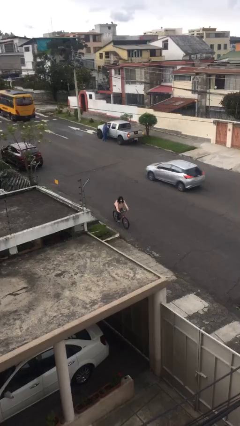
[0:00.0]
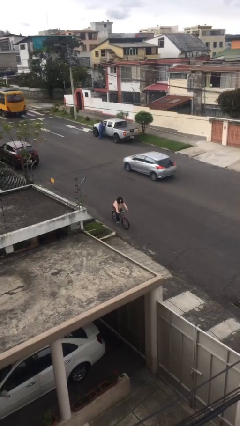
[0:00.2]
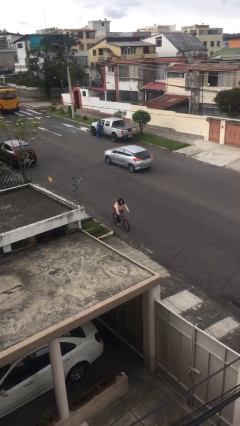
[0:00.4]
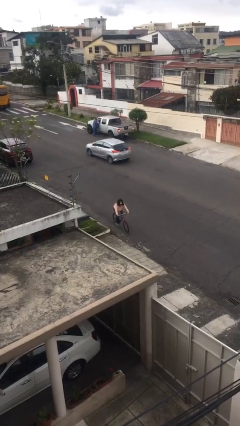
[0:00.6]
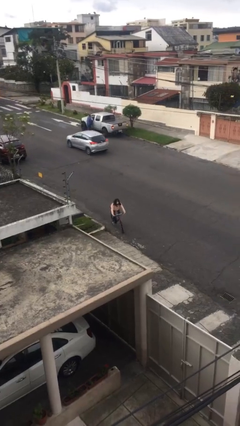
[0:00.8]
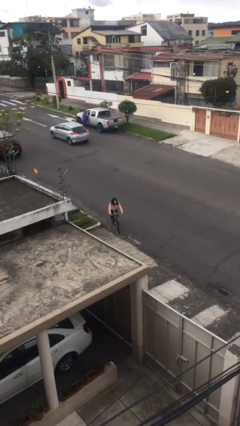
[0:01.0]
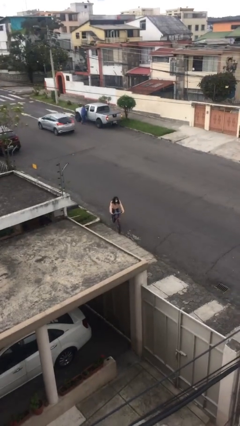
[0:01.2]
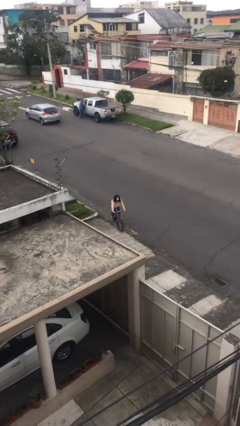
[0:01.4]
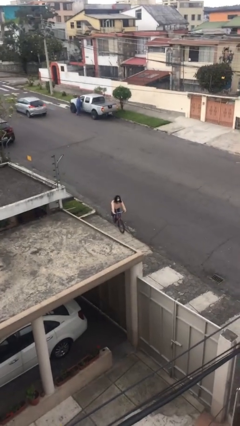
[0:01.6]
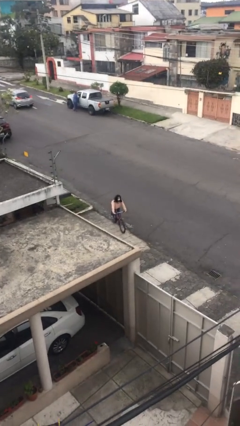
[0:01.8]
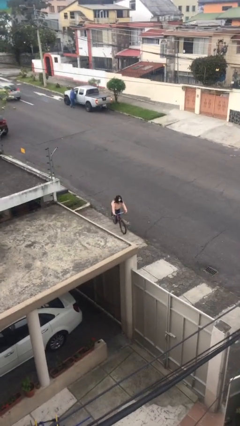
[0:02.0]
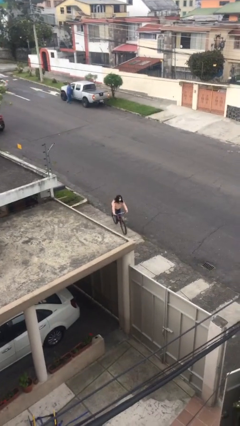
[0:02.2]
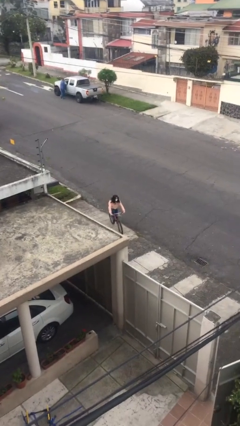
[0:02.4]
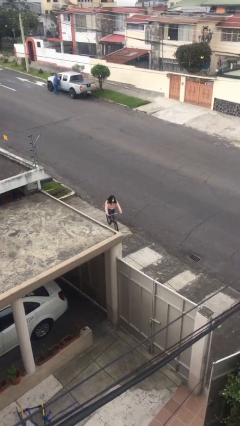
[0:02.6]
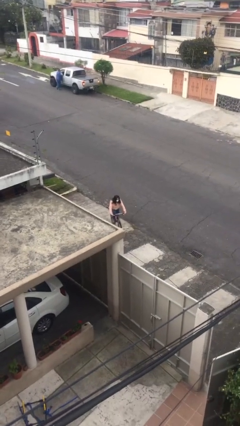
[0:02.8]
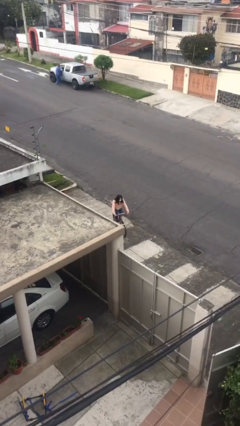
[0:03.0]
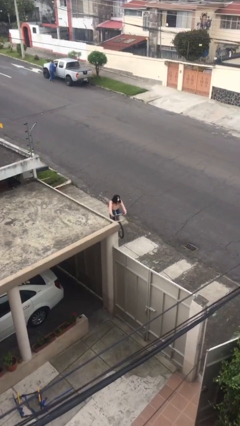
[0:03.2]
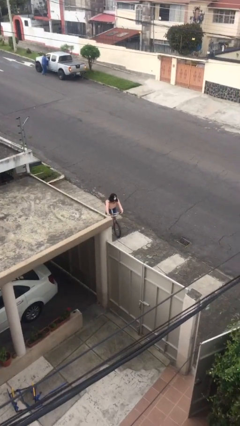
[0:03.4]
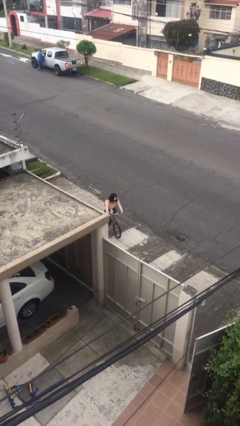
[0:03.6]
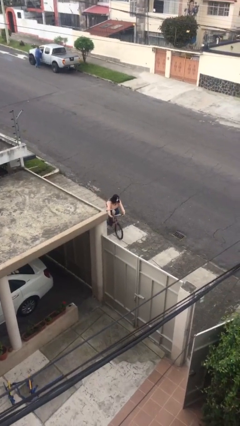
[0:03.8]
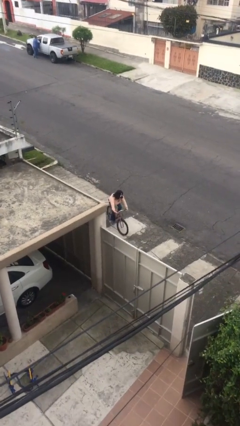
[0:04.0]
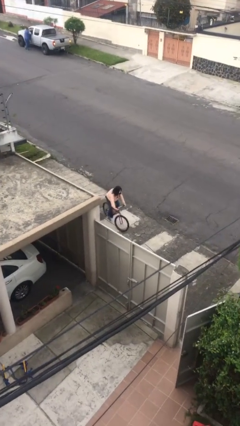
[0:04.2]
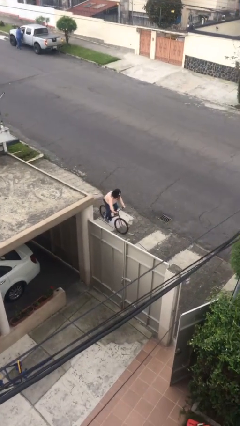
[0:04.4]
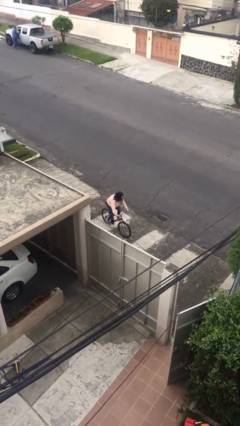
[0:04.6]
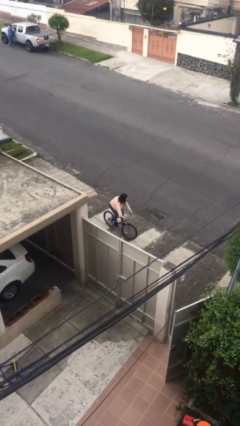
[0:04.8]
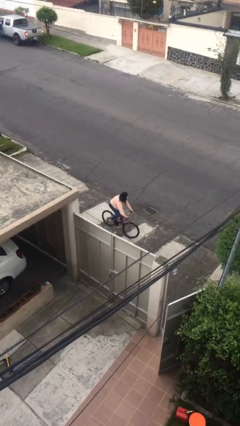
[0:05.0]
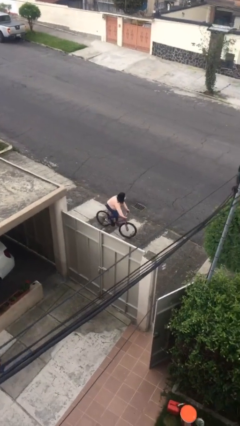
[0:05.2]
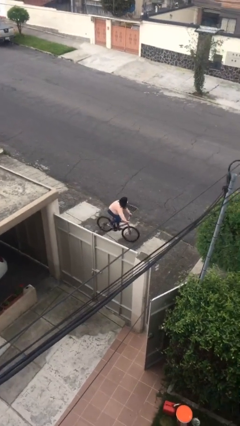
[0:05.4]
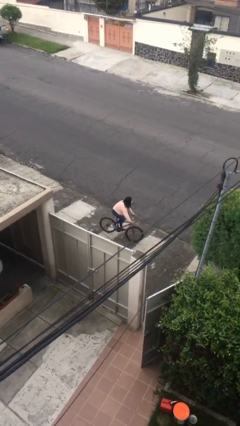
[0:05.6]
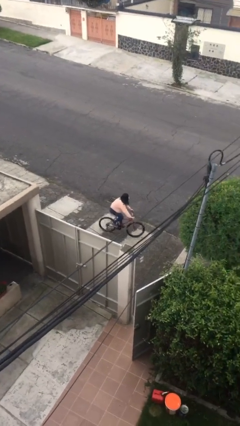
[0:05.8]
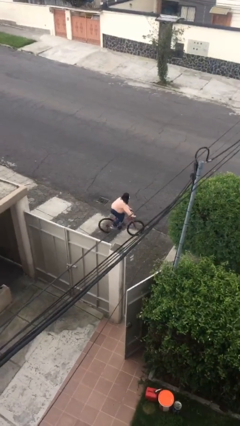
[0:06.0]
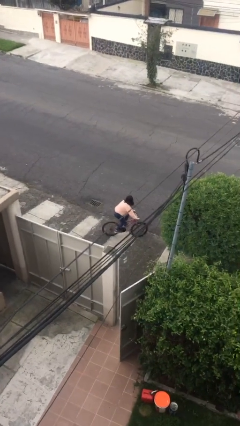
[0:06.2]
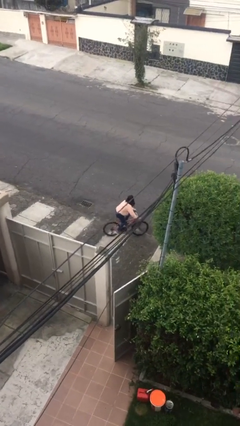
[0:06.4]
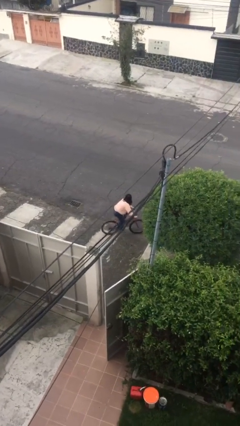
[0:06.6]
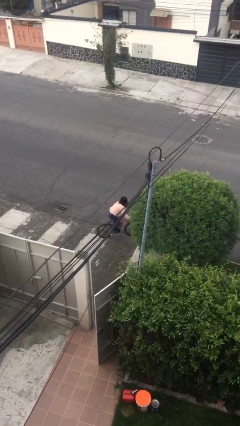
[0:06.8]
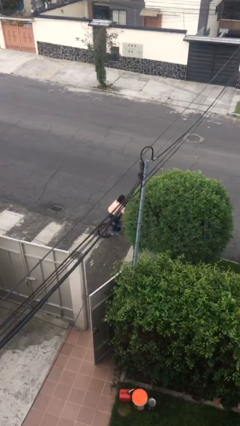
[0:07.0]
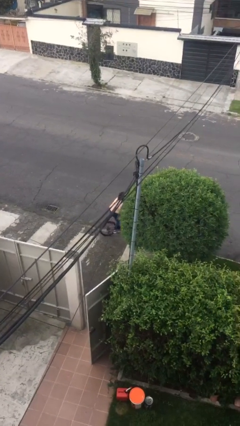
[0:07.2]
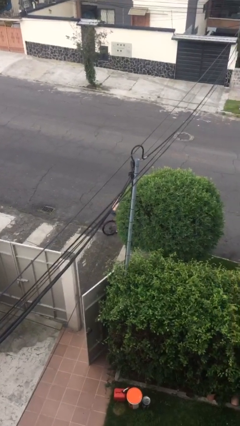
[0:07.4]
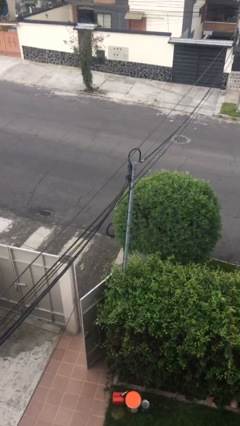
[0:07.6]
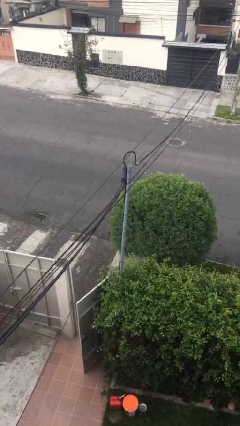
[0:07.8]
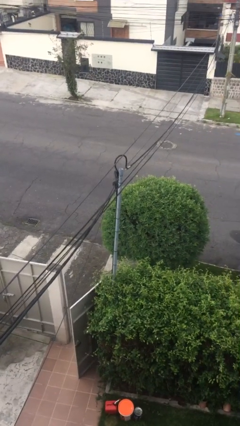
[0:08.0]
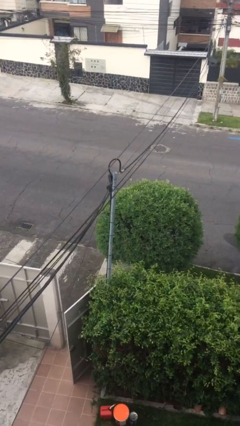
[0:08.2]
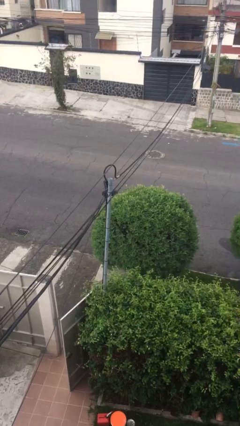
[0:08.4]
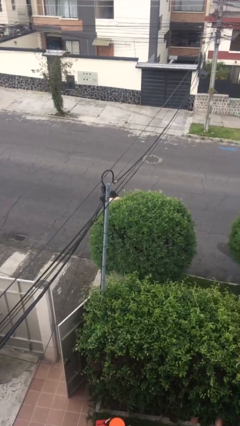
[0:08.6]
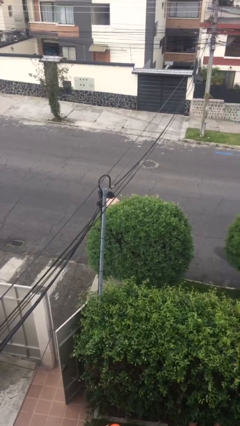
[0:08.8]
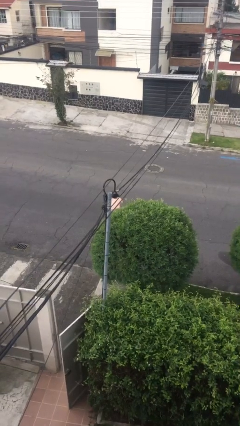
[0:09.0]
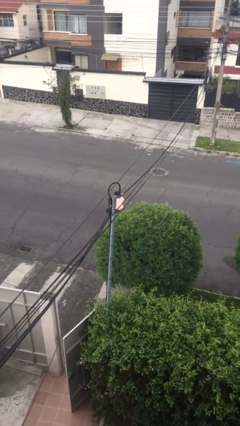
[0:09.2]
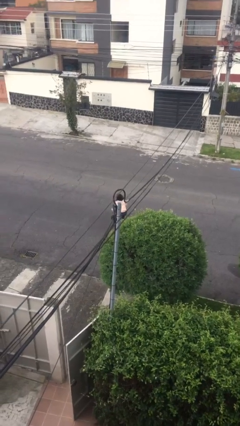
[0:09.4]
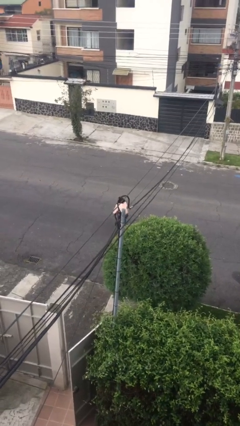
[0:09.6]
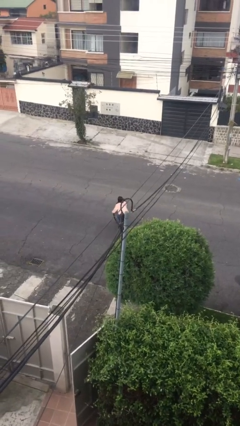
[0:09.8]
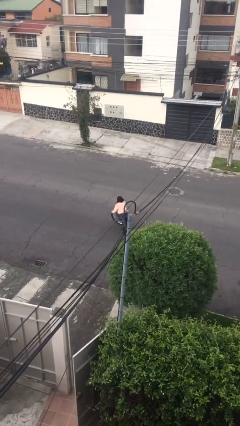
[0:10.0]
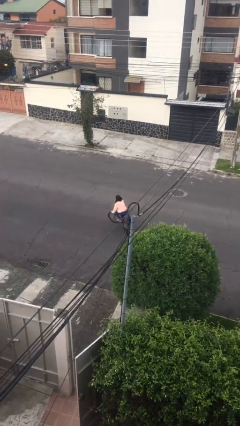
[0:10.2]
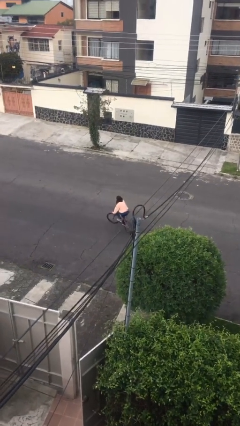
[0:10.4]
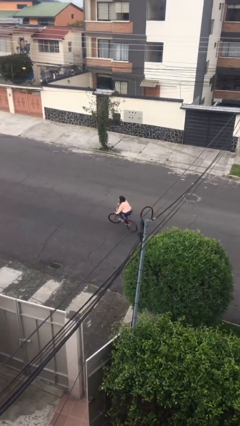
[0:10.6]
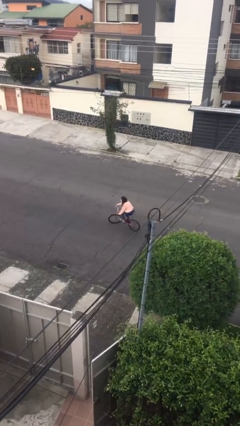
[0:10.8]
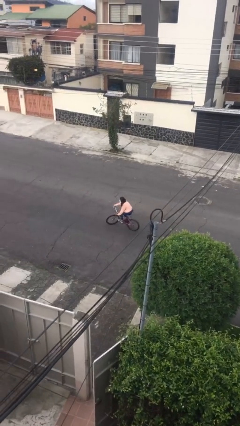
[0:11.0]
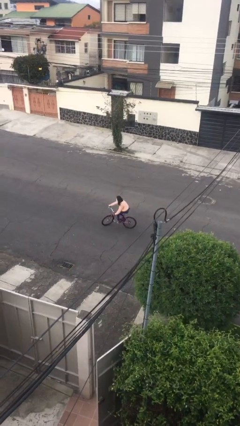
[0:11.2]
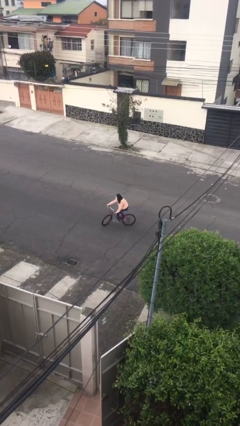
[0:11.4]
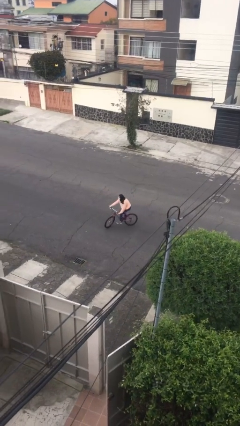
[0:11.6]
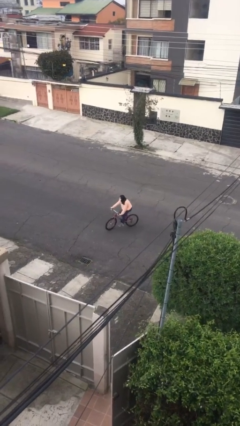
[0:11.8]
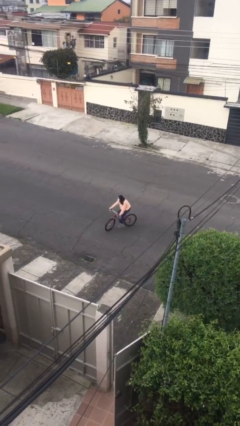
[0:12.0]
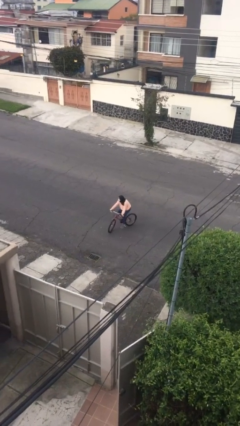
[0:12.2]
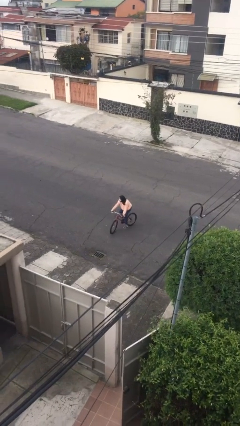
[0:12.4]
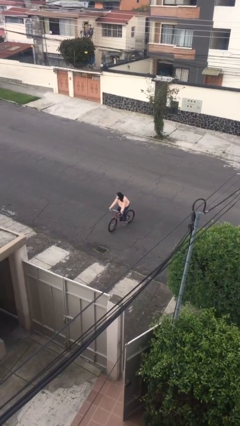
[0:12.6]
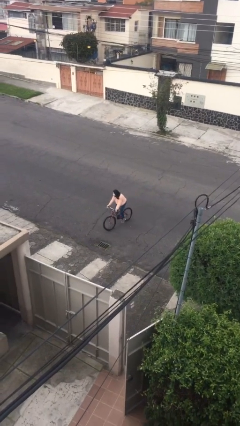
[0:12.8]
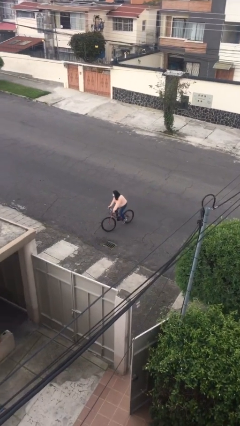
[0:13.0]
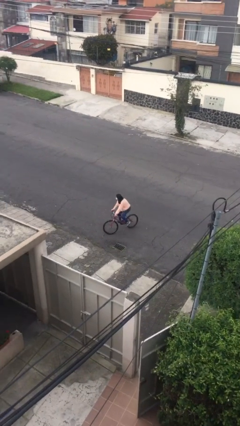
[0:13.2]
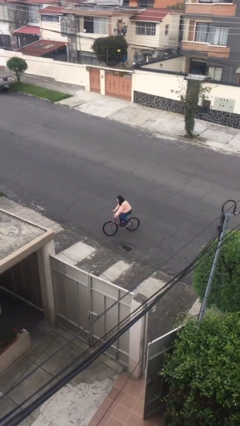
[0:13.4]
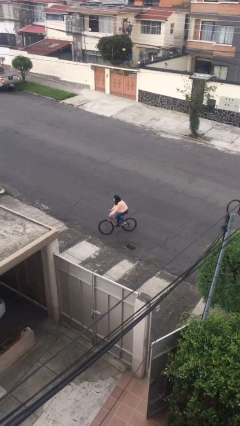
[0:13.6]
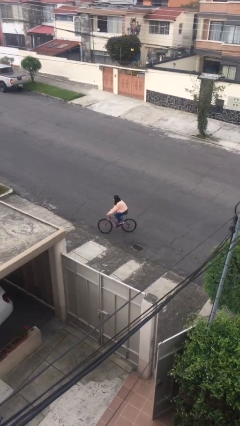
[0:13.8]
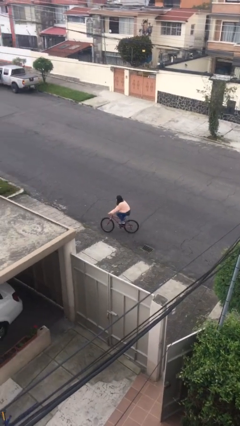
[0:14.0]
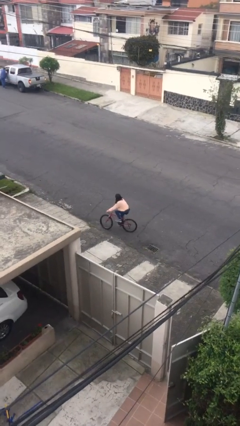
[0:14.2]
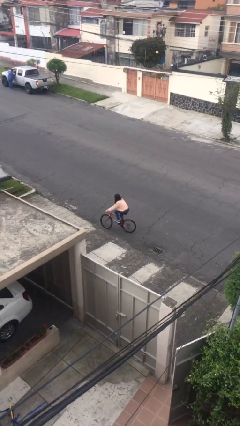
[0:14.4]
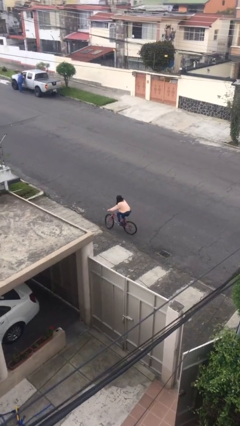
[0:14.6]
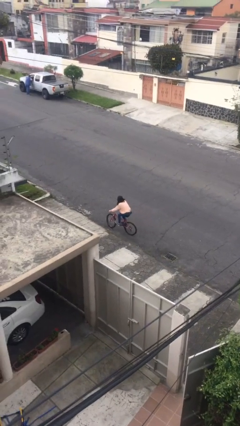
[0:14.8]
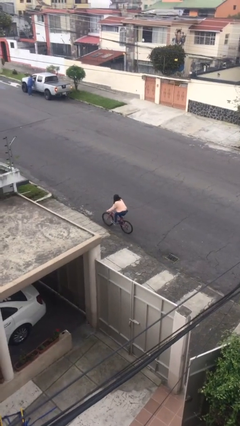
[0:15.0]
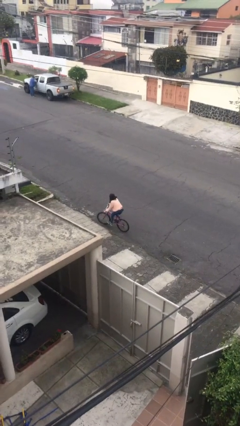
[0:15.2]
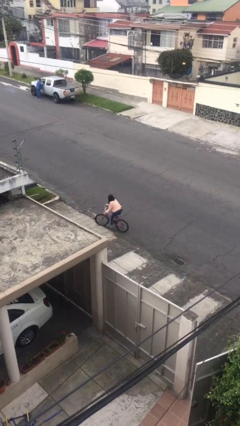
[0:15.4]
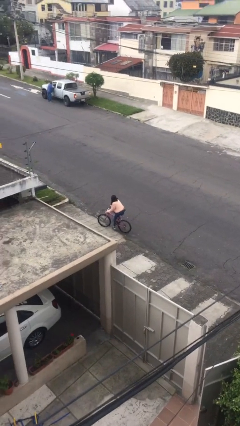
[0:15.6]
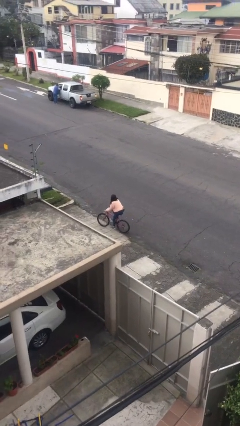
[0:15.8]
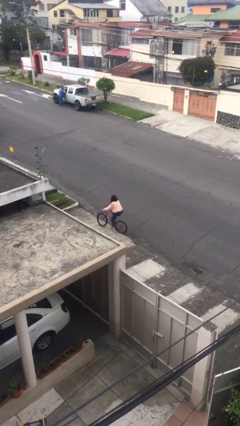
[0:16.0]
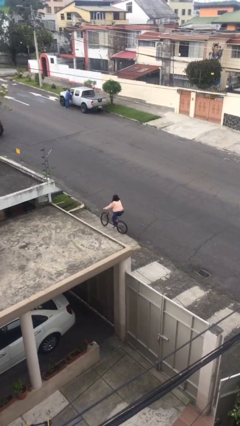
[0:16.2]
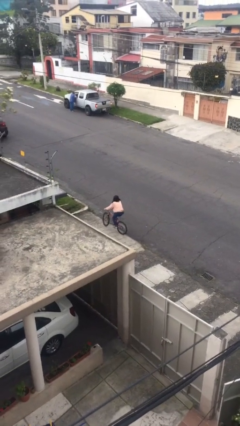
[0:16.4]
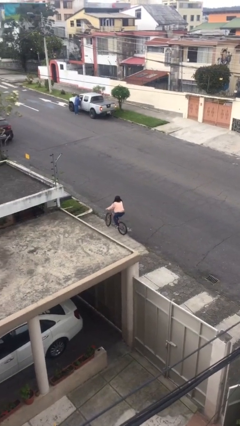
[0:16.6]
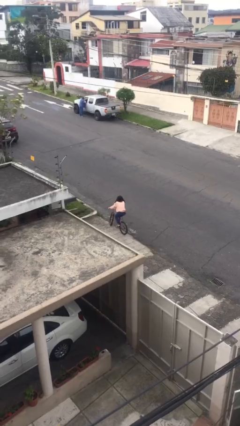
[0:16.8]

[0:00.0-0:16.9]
person rides bicycle

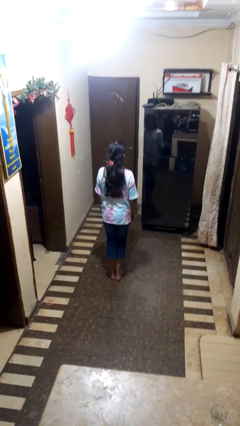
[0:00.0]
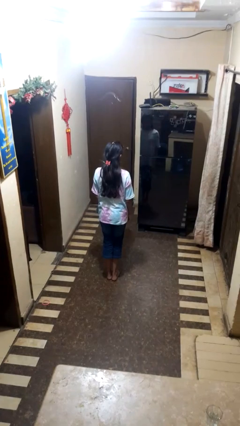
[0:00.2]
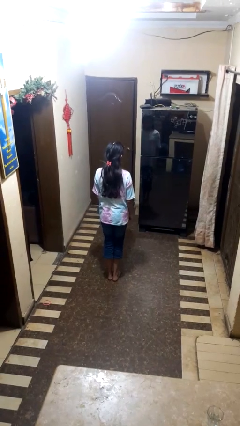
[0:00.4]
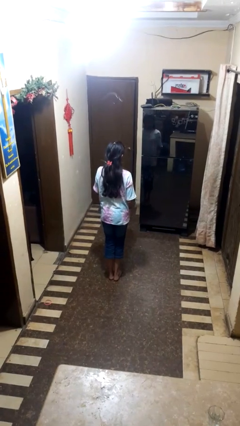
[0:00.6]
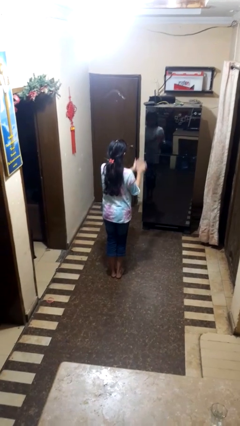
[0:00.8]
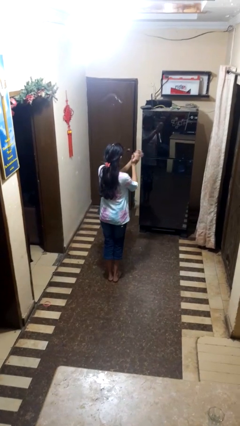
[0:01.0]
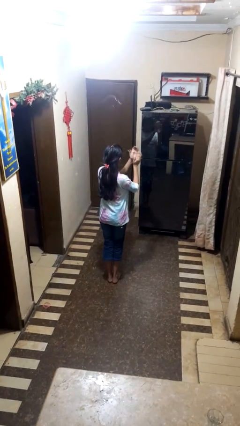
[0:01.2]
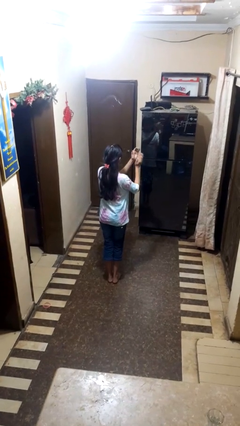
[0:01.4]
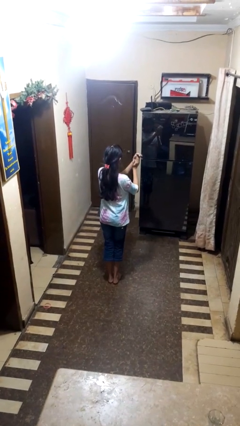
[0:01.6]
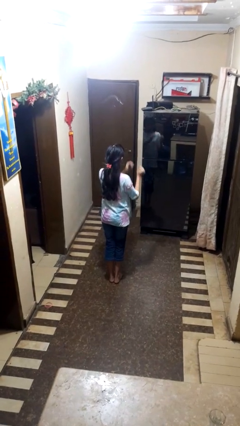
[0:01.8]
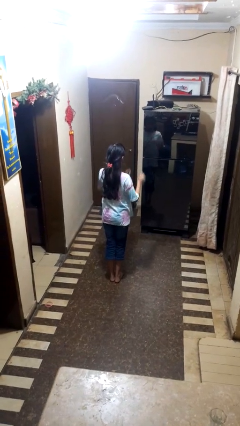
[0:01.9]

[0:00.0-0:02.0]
person claps hands
